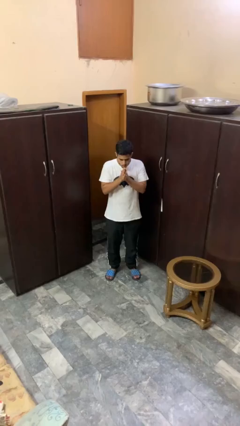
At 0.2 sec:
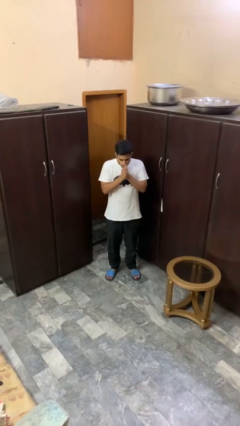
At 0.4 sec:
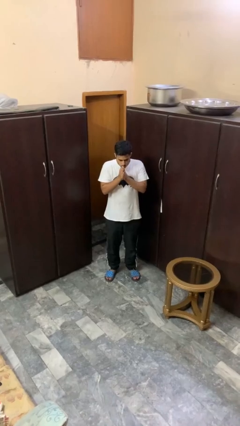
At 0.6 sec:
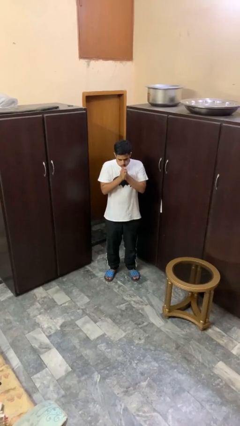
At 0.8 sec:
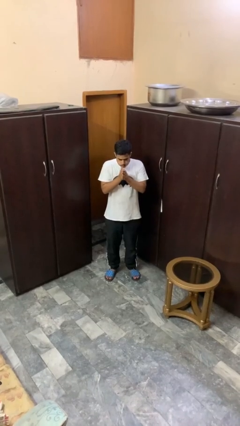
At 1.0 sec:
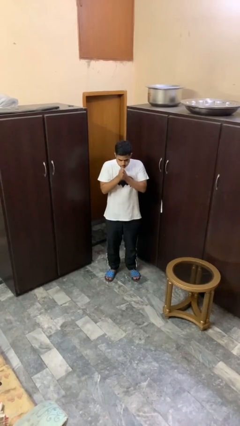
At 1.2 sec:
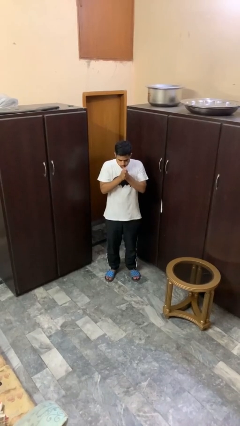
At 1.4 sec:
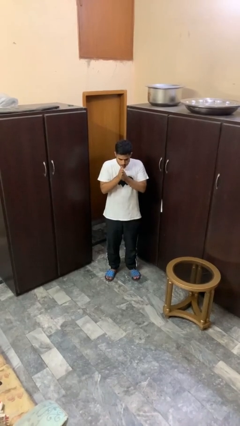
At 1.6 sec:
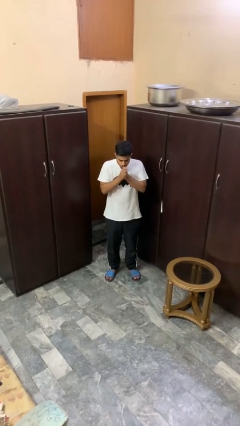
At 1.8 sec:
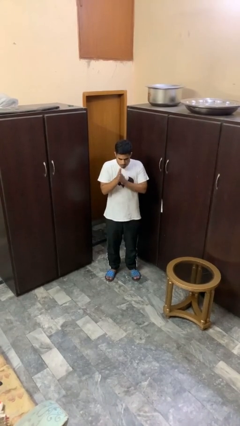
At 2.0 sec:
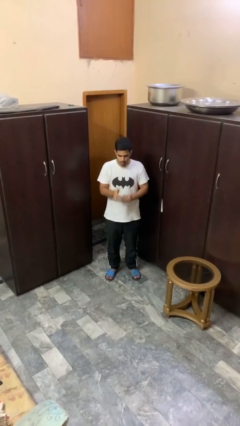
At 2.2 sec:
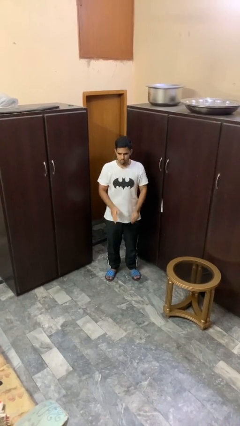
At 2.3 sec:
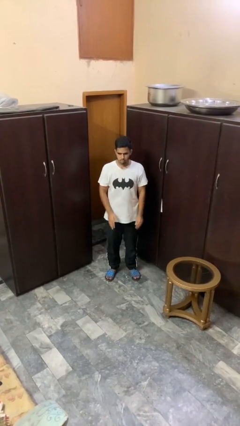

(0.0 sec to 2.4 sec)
person blows into hands

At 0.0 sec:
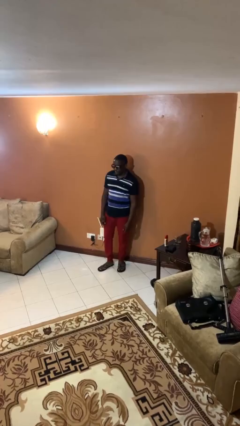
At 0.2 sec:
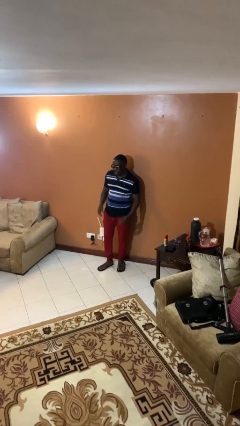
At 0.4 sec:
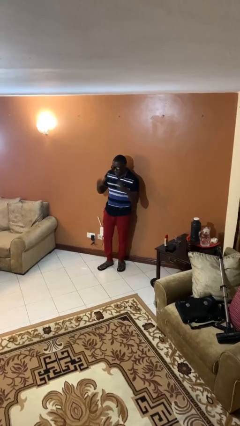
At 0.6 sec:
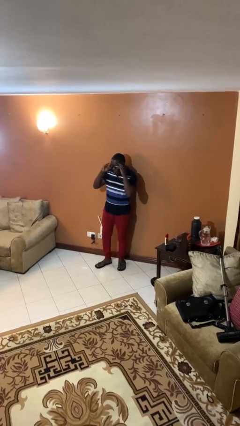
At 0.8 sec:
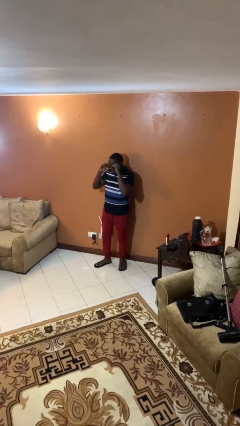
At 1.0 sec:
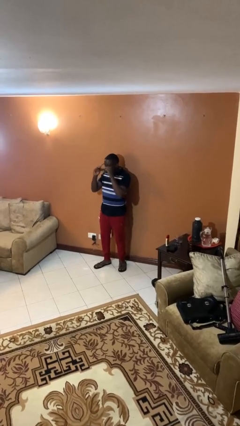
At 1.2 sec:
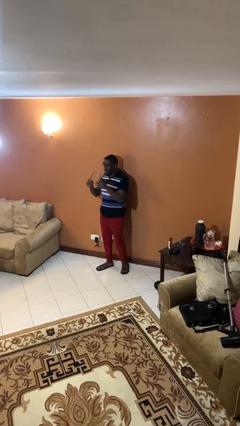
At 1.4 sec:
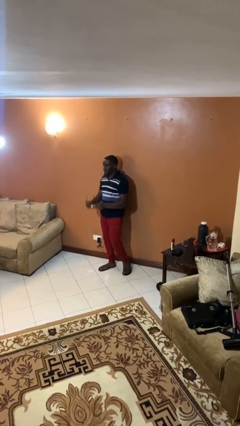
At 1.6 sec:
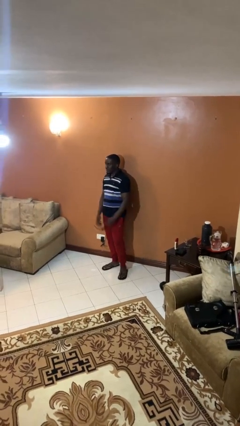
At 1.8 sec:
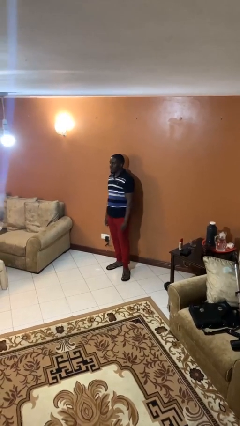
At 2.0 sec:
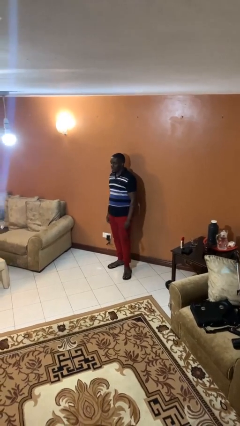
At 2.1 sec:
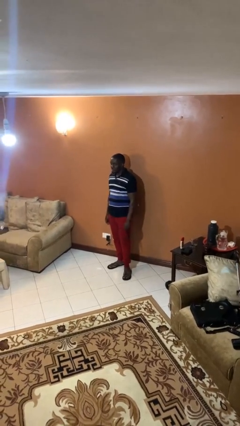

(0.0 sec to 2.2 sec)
person takes off sunglasses

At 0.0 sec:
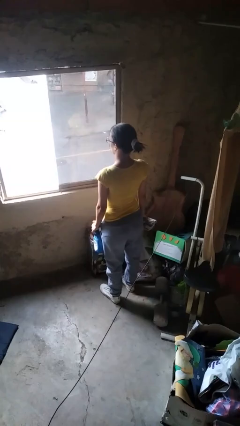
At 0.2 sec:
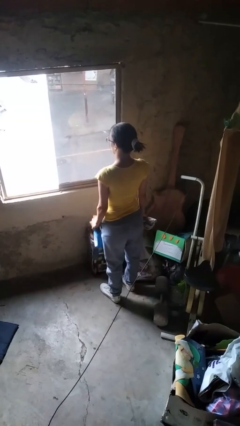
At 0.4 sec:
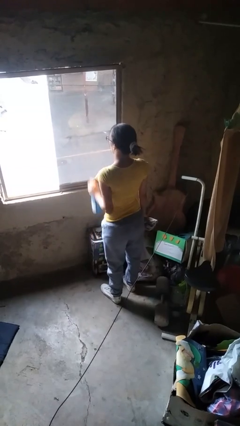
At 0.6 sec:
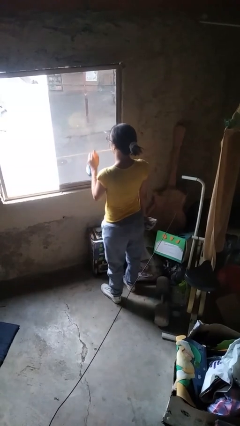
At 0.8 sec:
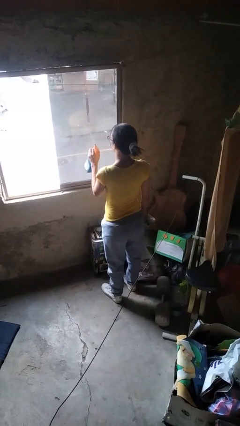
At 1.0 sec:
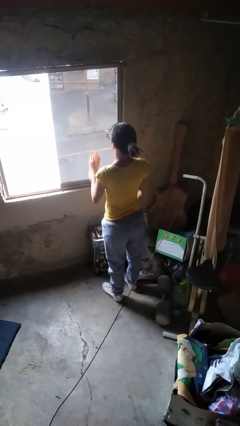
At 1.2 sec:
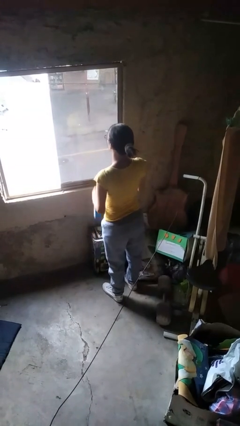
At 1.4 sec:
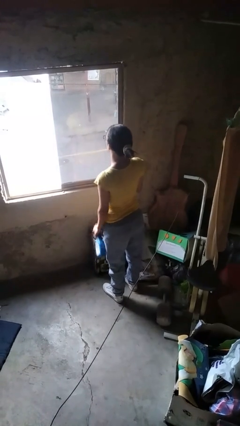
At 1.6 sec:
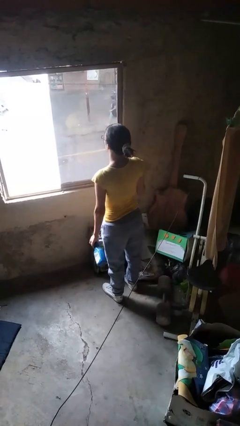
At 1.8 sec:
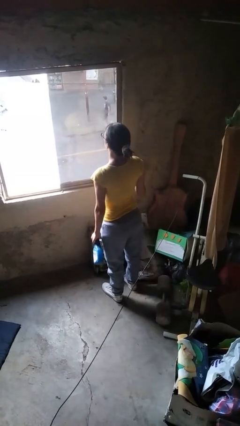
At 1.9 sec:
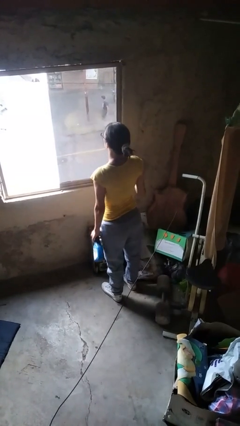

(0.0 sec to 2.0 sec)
person sprays from bottle

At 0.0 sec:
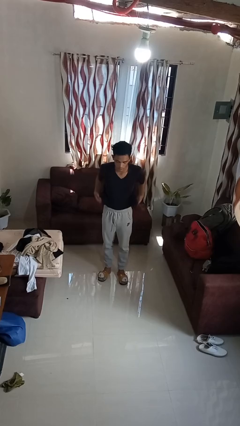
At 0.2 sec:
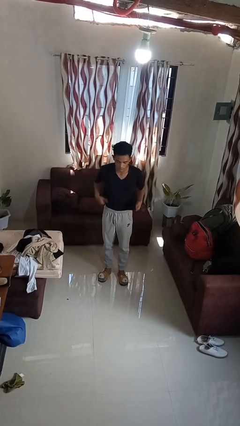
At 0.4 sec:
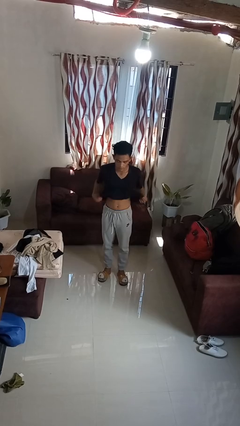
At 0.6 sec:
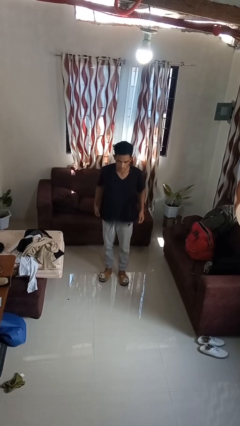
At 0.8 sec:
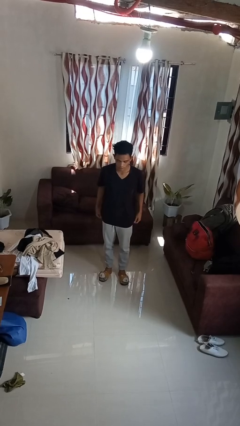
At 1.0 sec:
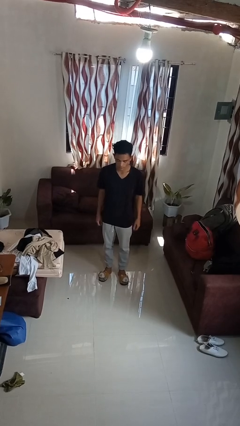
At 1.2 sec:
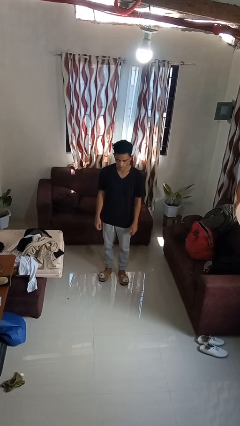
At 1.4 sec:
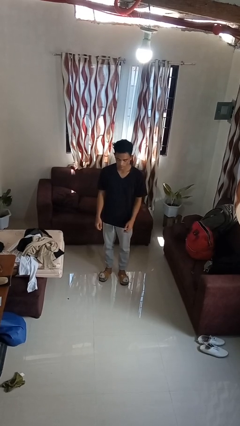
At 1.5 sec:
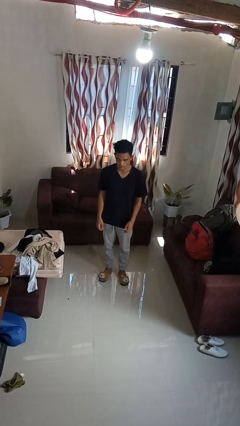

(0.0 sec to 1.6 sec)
person untucks shirt

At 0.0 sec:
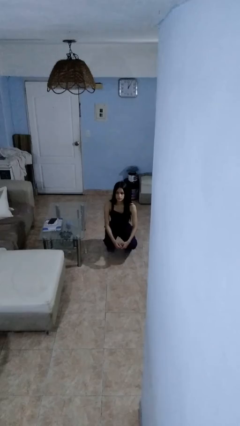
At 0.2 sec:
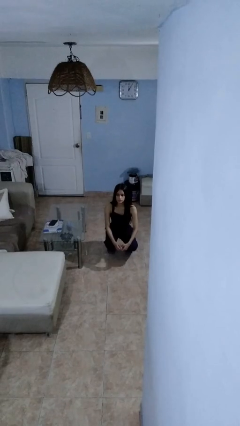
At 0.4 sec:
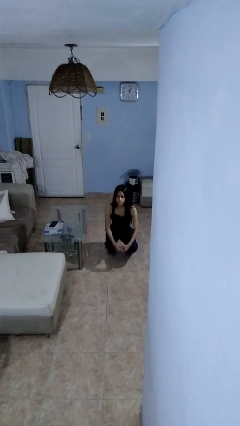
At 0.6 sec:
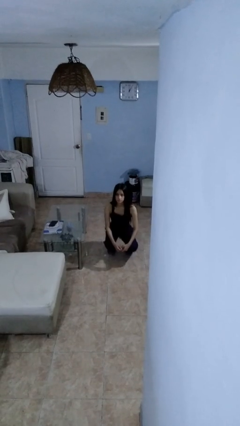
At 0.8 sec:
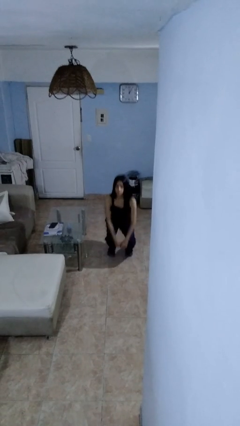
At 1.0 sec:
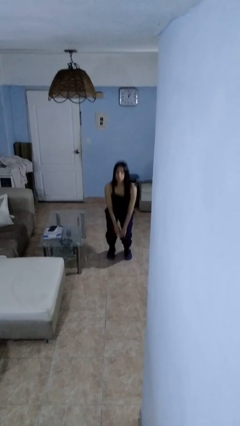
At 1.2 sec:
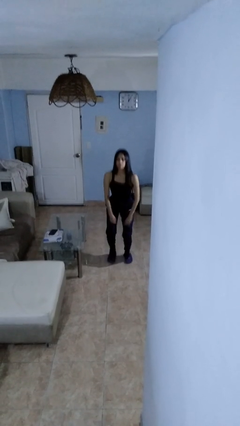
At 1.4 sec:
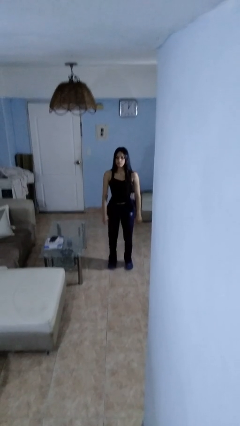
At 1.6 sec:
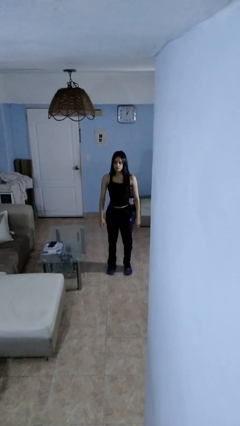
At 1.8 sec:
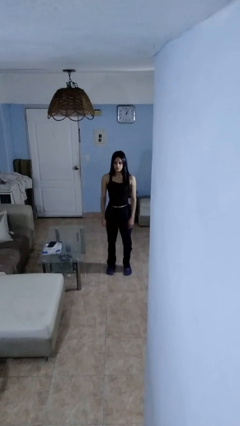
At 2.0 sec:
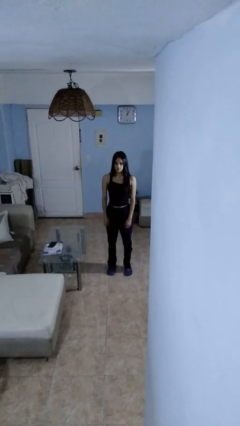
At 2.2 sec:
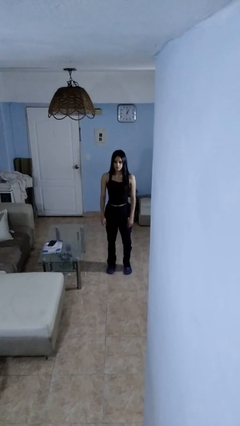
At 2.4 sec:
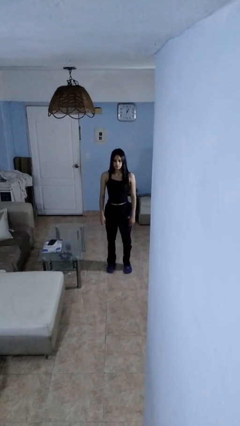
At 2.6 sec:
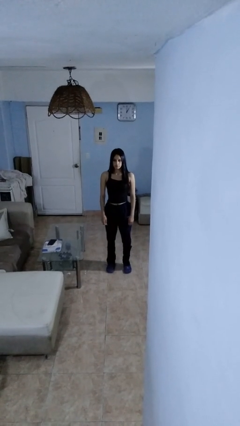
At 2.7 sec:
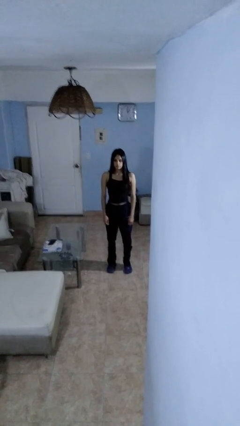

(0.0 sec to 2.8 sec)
person stands up

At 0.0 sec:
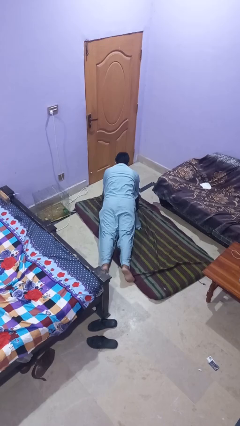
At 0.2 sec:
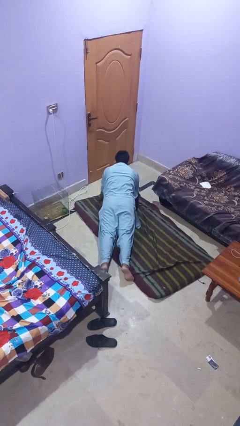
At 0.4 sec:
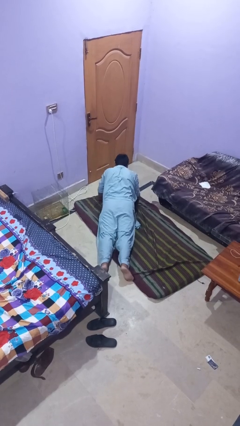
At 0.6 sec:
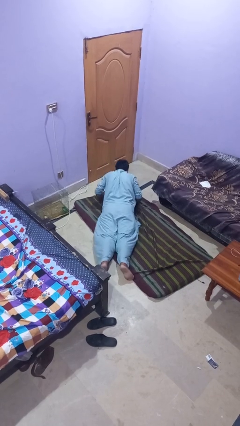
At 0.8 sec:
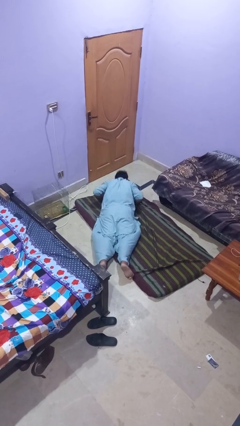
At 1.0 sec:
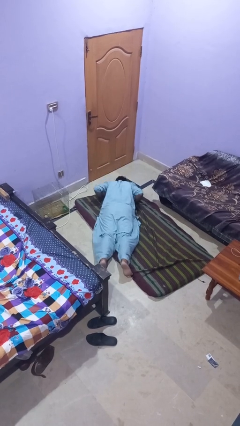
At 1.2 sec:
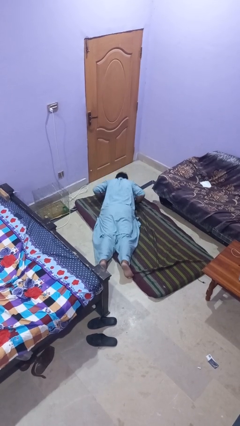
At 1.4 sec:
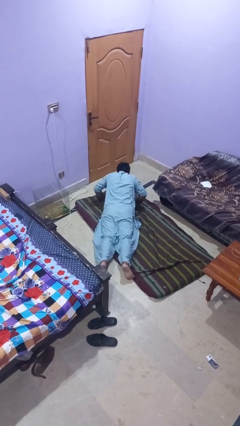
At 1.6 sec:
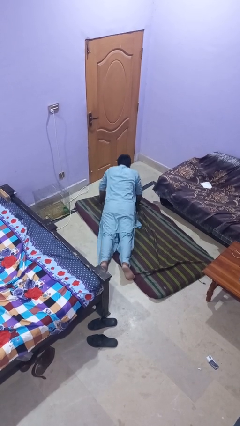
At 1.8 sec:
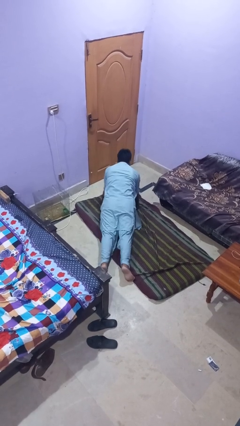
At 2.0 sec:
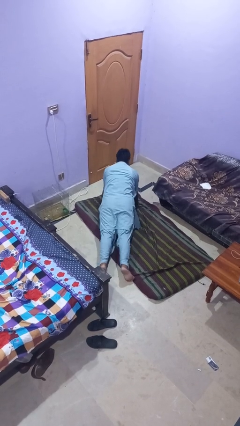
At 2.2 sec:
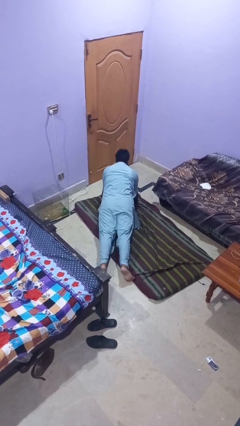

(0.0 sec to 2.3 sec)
person exercises with pushup

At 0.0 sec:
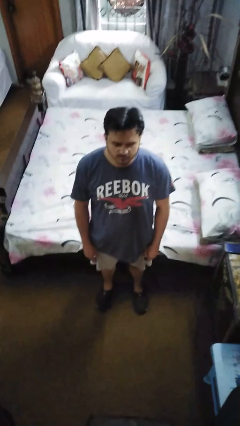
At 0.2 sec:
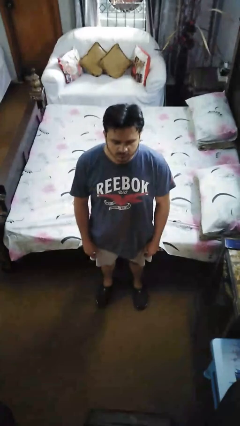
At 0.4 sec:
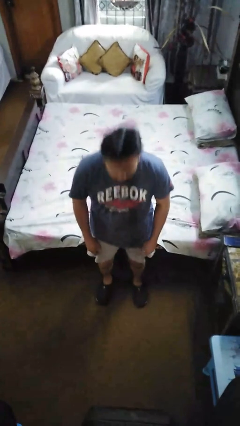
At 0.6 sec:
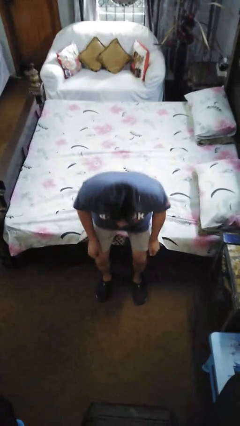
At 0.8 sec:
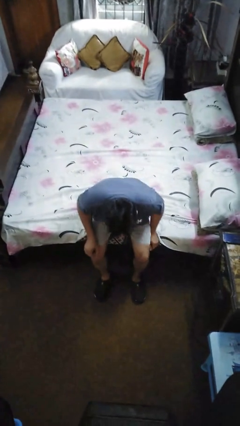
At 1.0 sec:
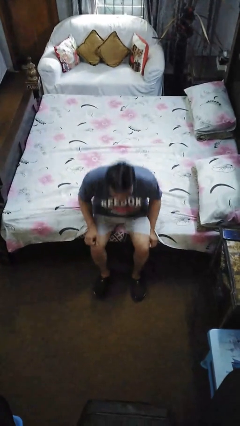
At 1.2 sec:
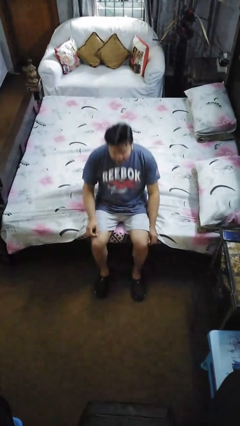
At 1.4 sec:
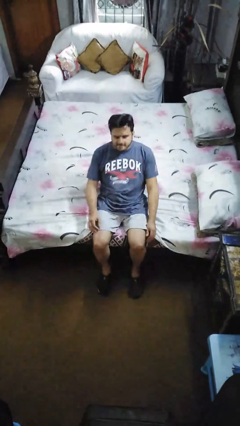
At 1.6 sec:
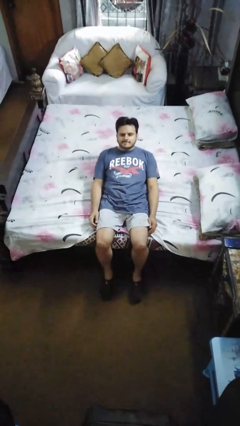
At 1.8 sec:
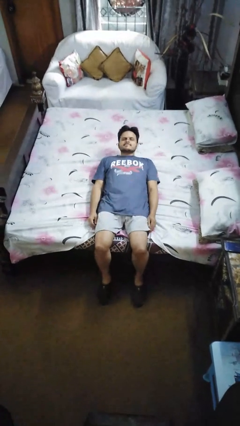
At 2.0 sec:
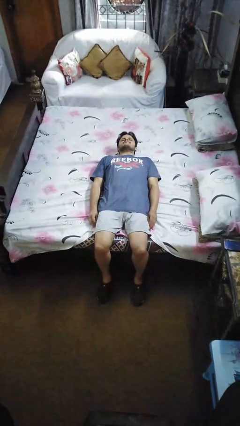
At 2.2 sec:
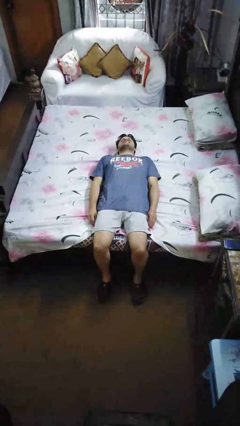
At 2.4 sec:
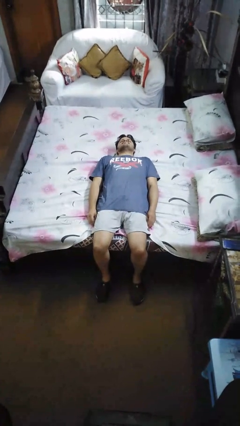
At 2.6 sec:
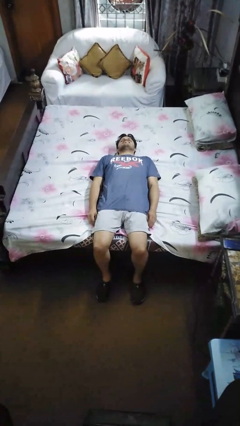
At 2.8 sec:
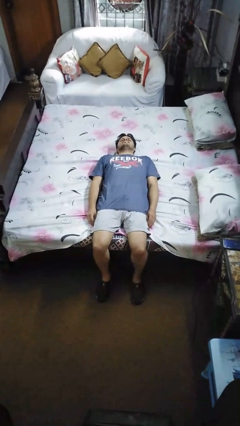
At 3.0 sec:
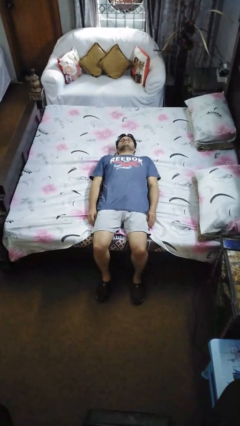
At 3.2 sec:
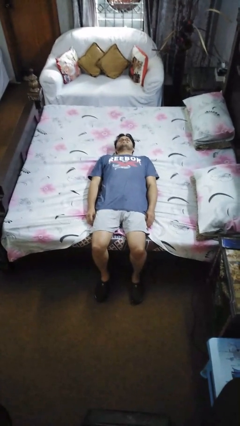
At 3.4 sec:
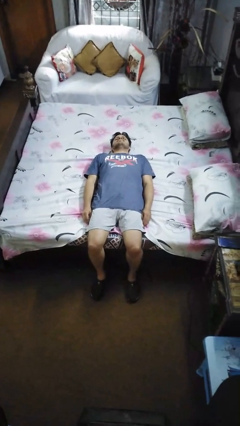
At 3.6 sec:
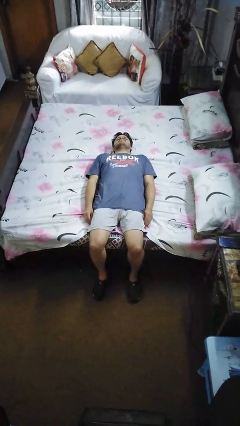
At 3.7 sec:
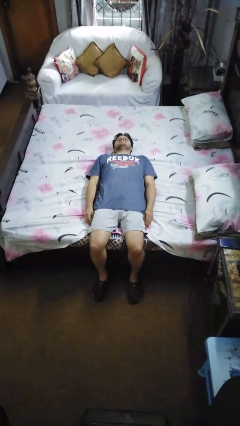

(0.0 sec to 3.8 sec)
person lies down on bed
